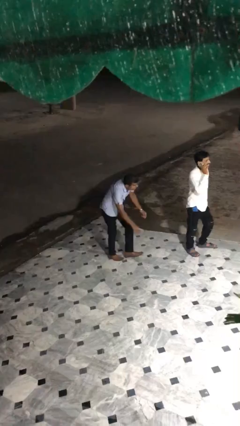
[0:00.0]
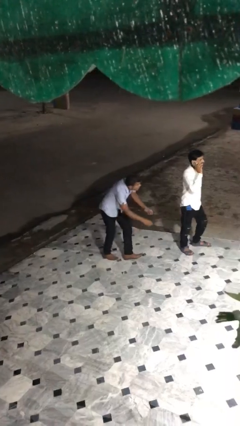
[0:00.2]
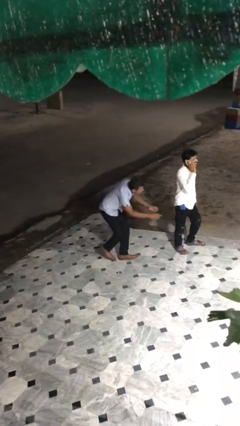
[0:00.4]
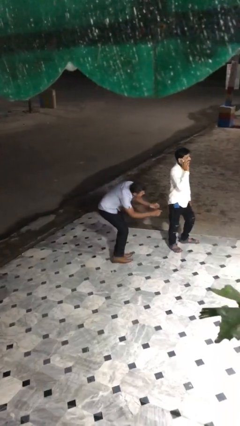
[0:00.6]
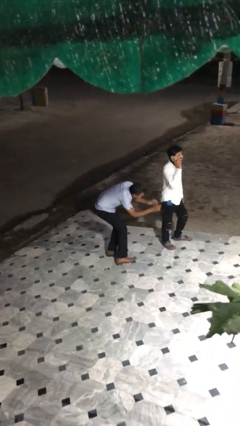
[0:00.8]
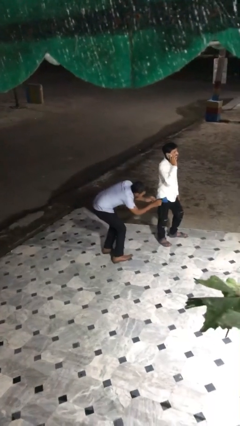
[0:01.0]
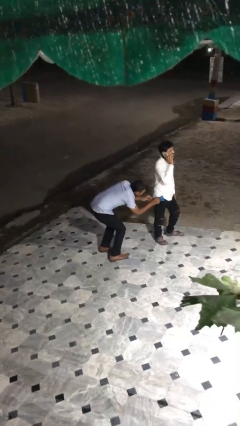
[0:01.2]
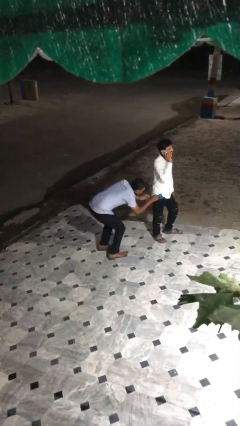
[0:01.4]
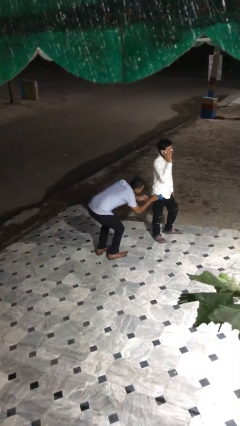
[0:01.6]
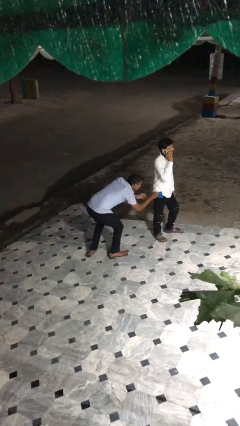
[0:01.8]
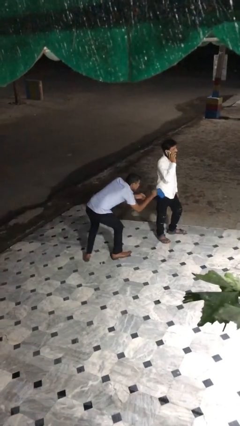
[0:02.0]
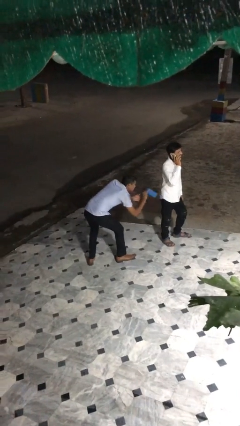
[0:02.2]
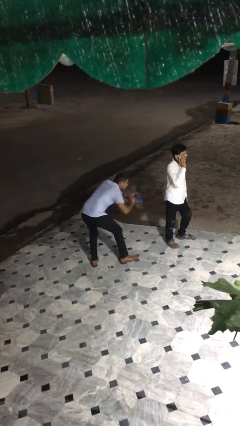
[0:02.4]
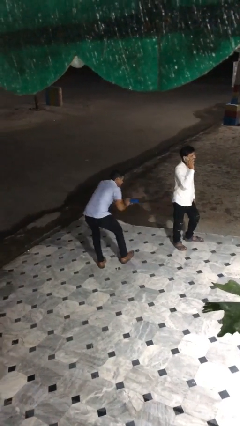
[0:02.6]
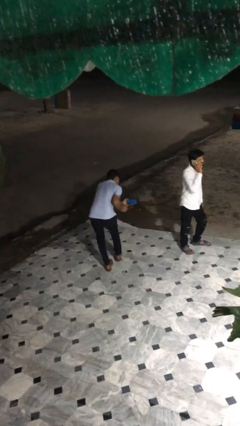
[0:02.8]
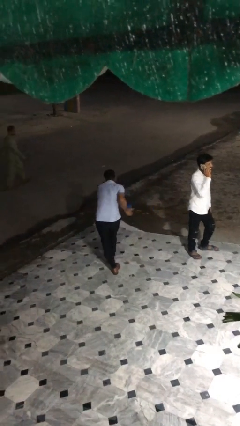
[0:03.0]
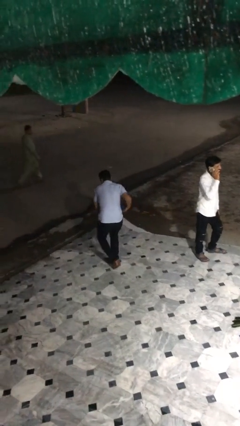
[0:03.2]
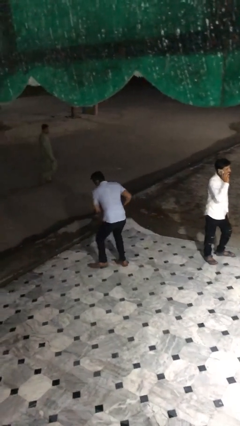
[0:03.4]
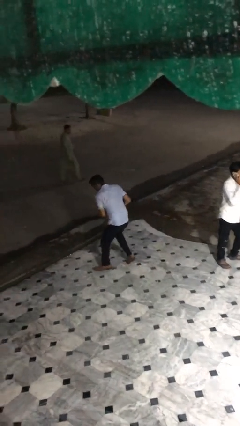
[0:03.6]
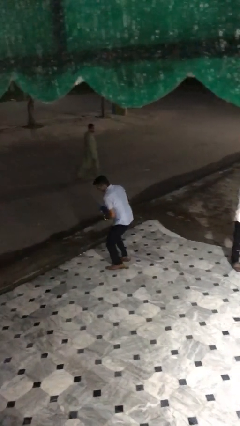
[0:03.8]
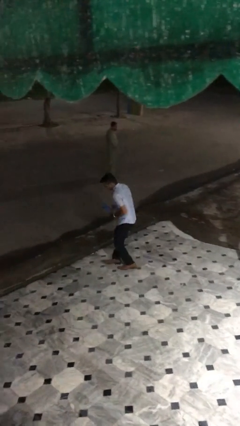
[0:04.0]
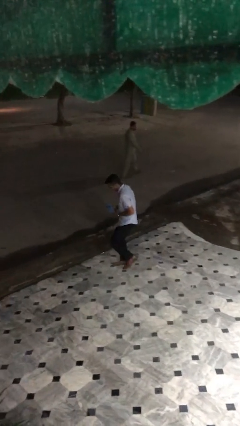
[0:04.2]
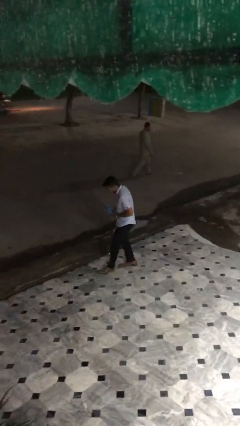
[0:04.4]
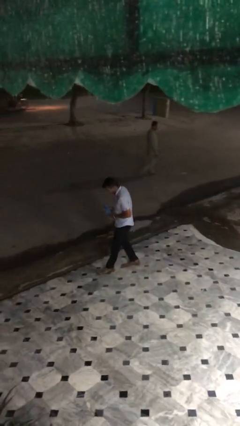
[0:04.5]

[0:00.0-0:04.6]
person steals object from person

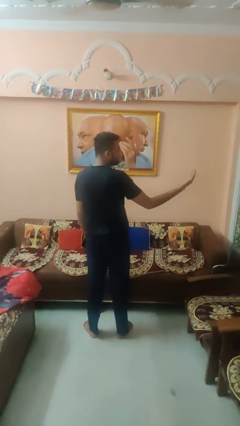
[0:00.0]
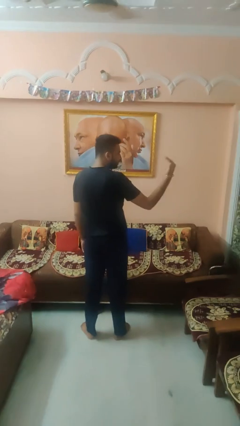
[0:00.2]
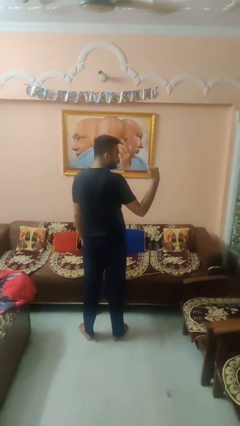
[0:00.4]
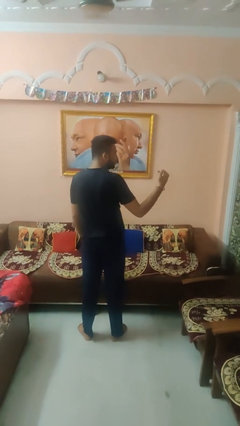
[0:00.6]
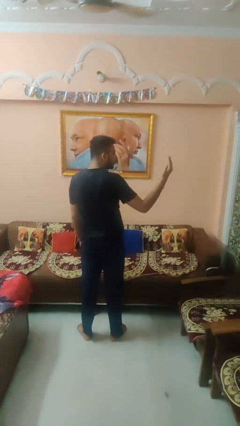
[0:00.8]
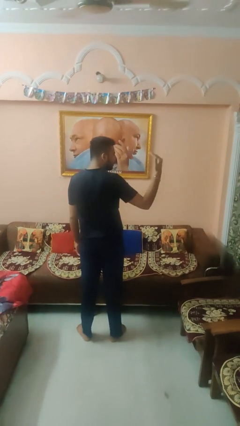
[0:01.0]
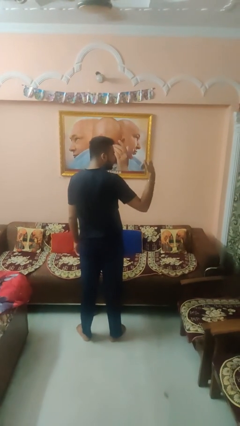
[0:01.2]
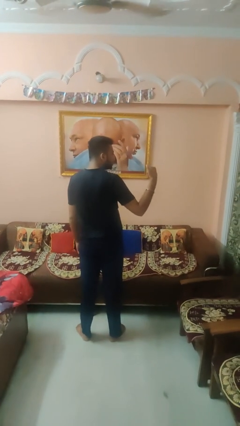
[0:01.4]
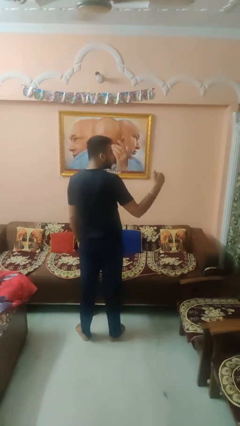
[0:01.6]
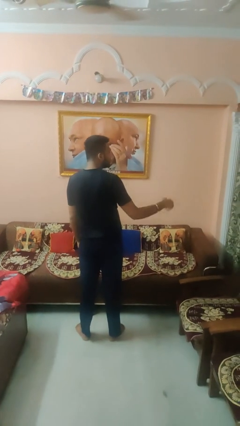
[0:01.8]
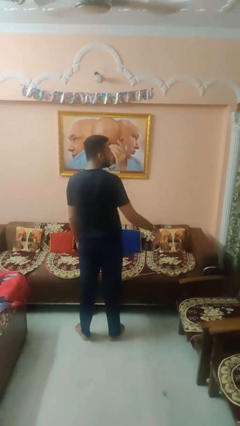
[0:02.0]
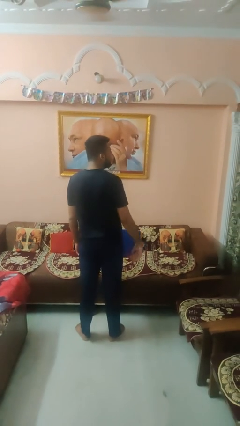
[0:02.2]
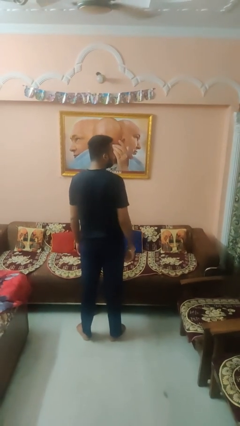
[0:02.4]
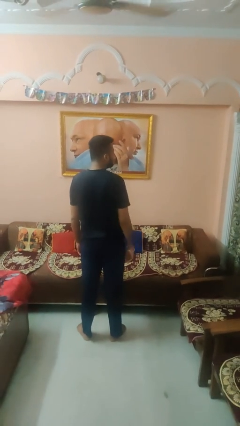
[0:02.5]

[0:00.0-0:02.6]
person gestures come here

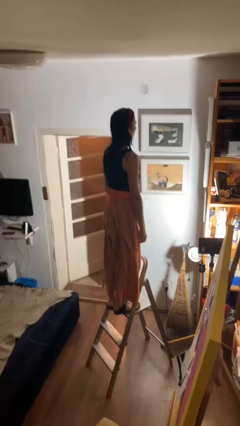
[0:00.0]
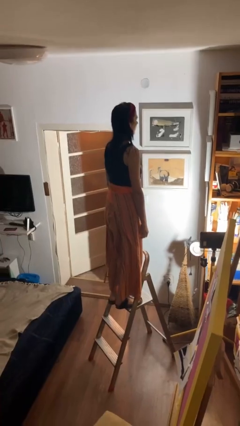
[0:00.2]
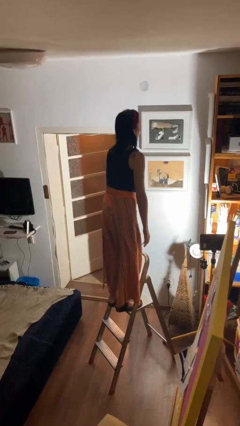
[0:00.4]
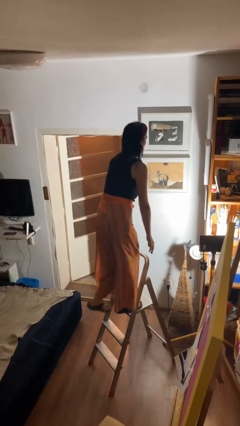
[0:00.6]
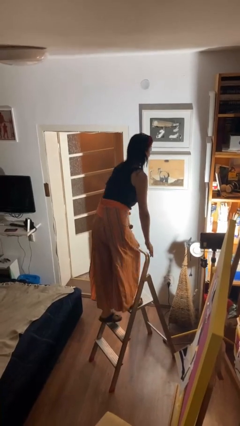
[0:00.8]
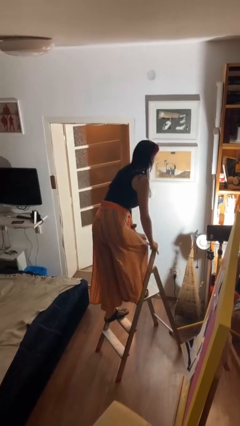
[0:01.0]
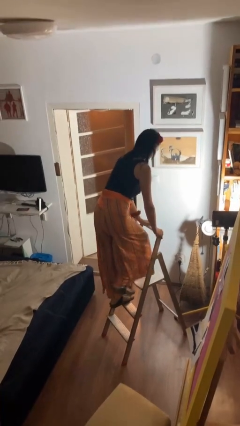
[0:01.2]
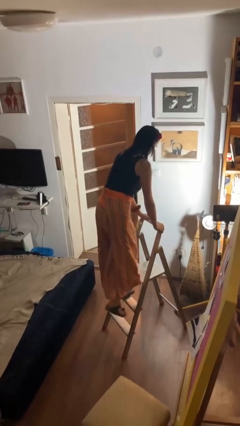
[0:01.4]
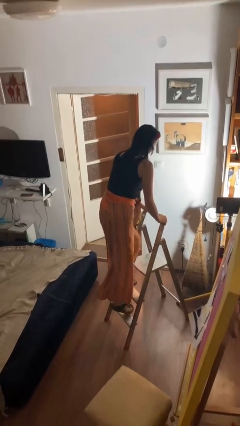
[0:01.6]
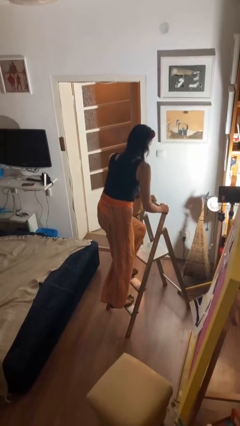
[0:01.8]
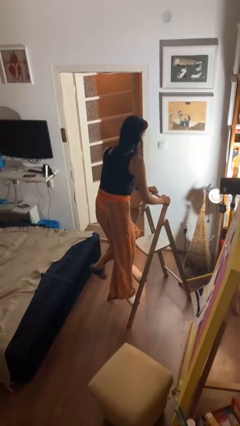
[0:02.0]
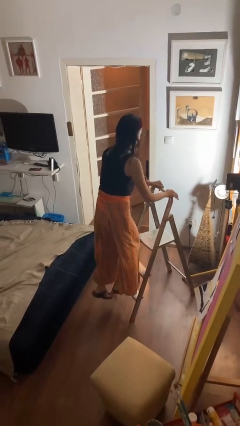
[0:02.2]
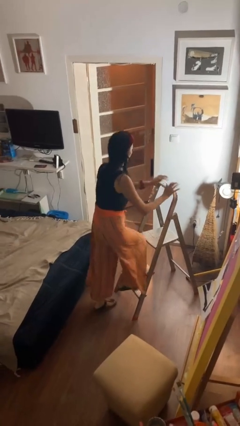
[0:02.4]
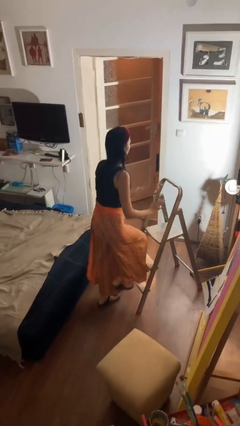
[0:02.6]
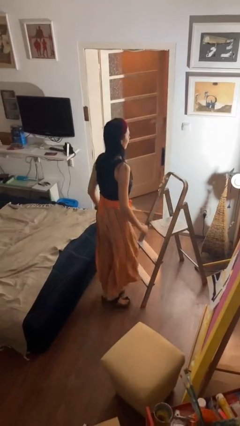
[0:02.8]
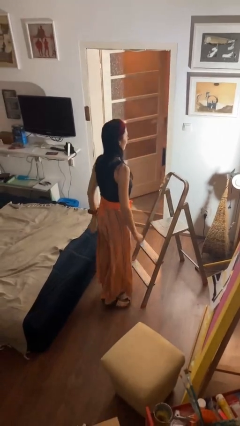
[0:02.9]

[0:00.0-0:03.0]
person climbs down ladder

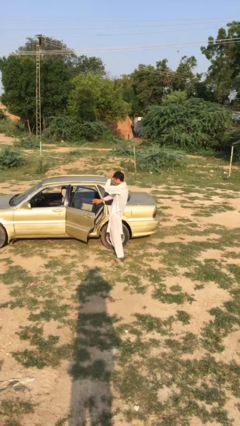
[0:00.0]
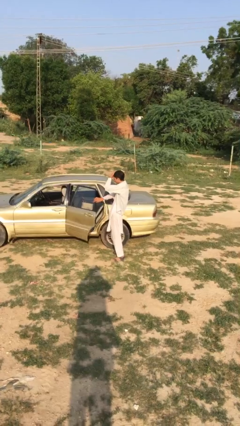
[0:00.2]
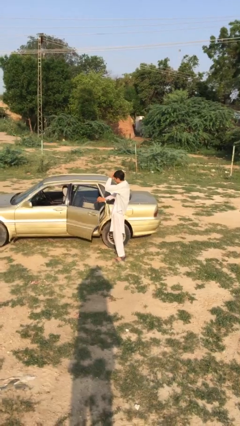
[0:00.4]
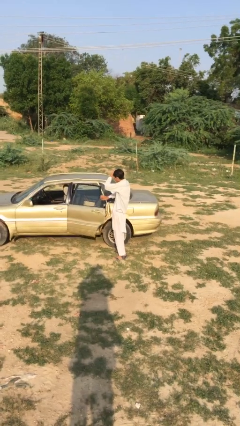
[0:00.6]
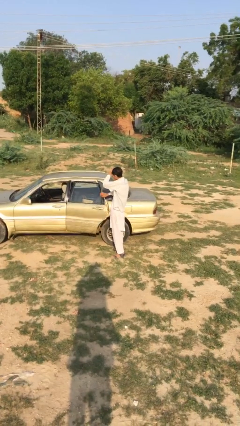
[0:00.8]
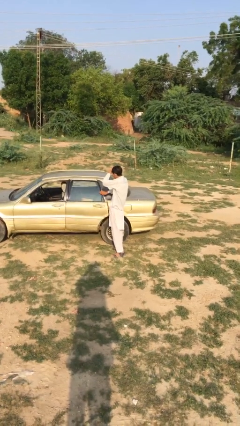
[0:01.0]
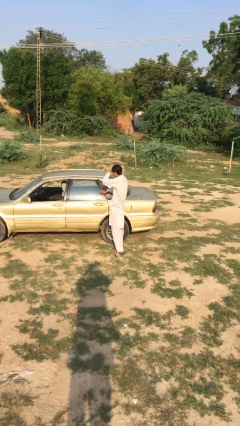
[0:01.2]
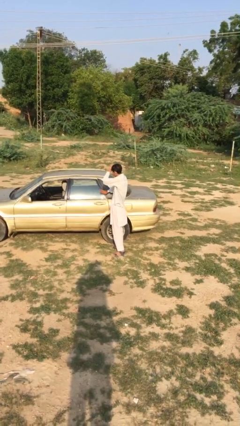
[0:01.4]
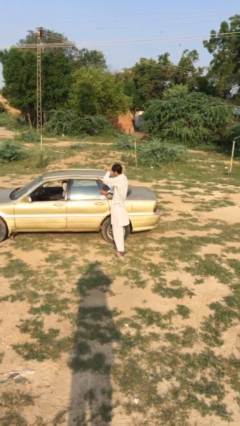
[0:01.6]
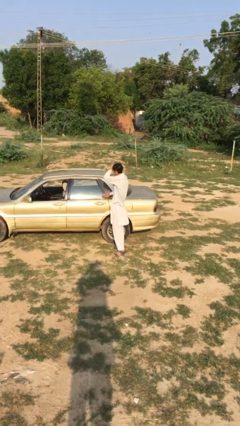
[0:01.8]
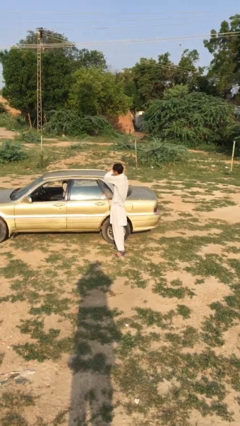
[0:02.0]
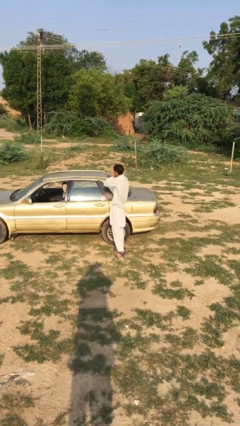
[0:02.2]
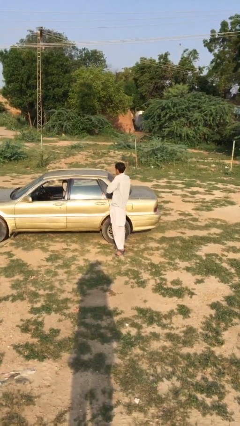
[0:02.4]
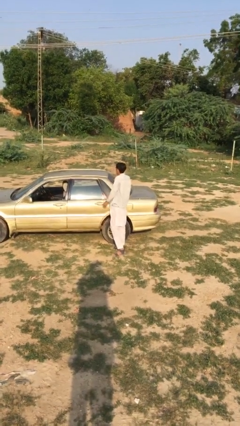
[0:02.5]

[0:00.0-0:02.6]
person closes car door

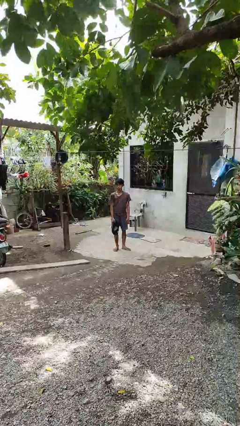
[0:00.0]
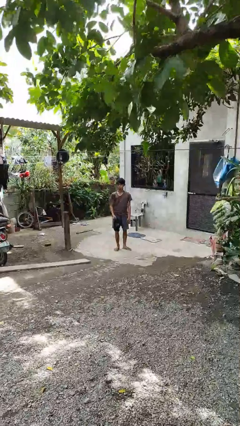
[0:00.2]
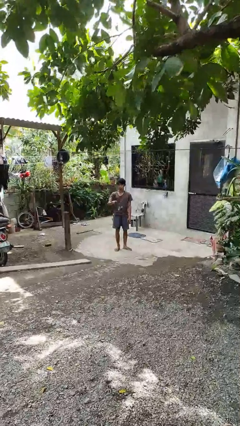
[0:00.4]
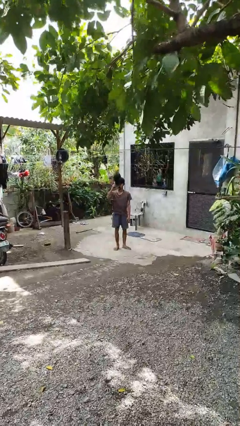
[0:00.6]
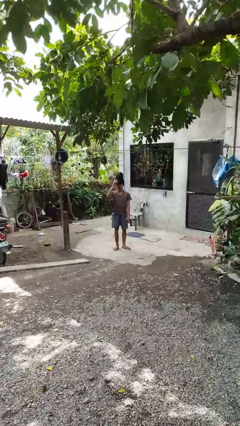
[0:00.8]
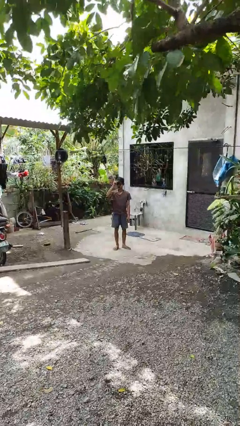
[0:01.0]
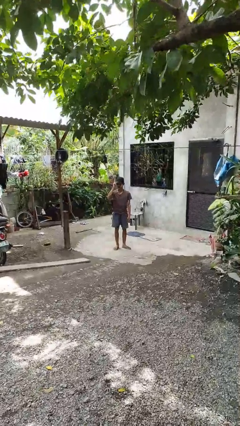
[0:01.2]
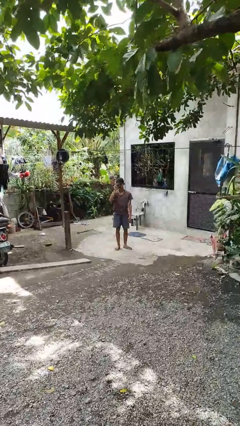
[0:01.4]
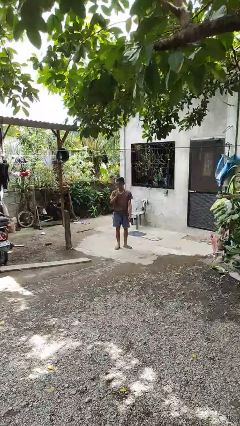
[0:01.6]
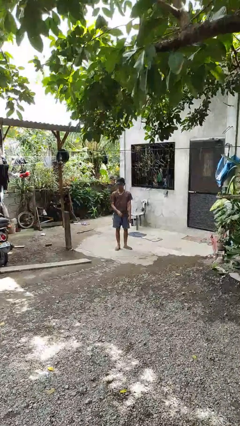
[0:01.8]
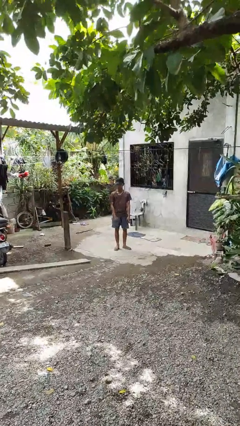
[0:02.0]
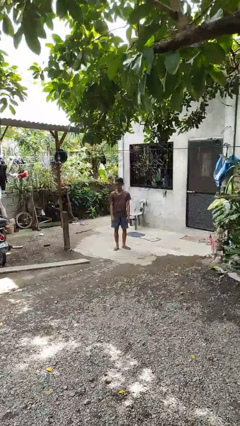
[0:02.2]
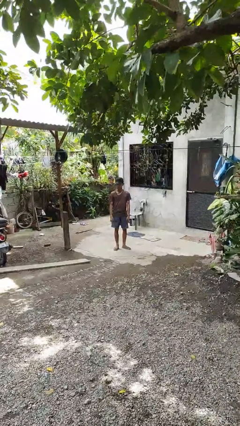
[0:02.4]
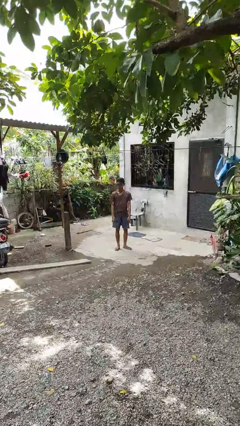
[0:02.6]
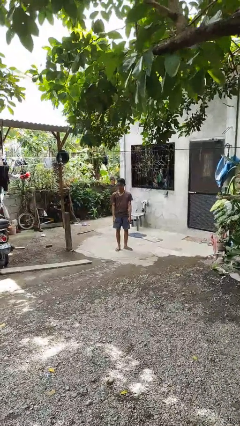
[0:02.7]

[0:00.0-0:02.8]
person puts on hat

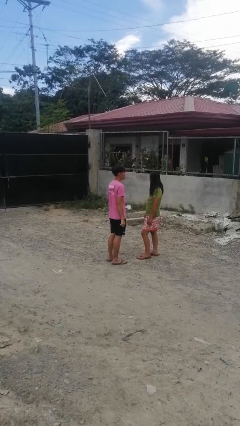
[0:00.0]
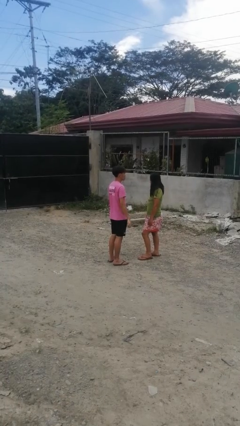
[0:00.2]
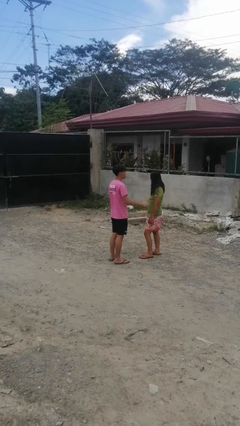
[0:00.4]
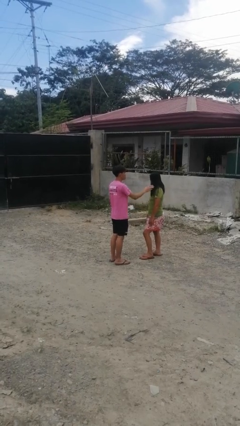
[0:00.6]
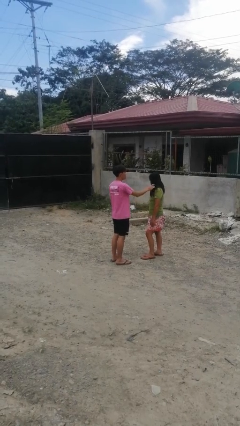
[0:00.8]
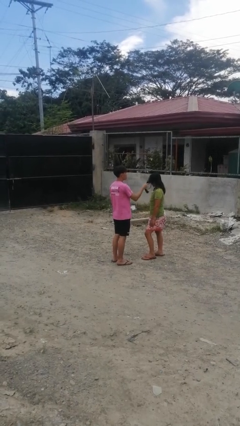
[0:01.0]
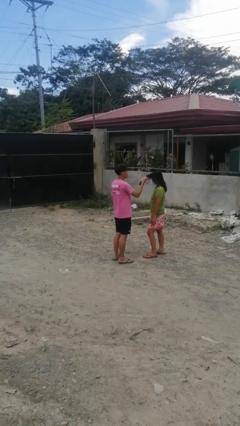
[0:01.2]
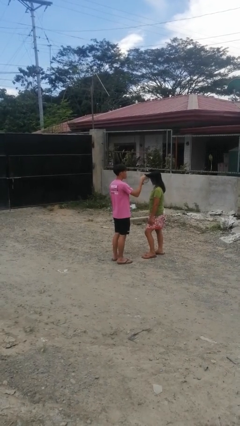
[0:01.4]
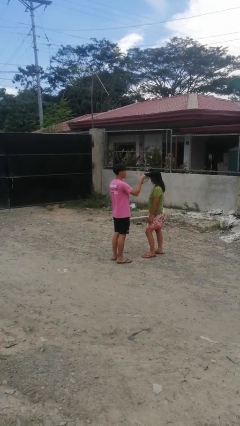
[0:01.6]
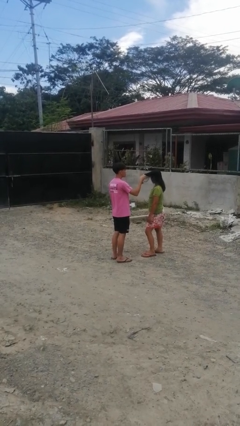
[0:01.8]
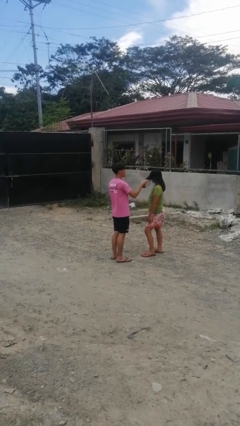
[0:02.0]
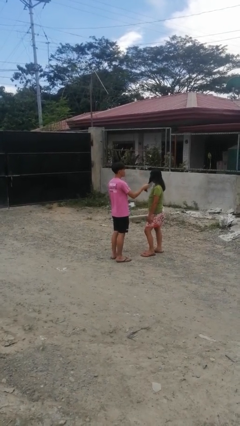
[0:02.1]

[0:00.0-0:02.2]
person grabs person by hair
